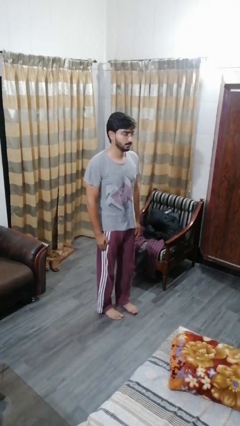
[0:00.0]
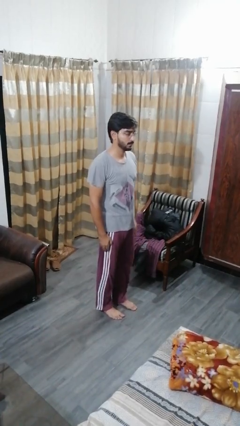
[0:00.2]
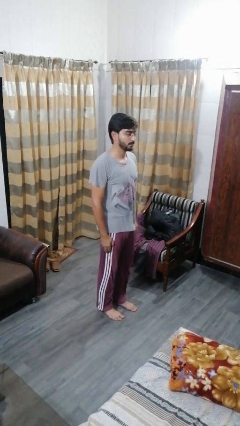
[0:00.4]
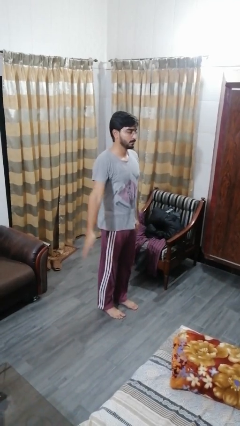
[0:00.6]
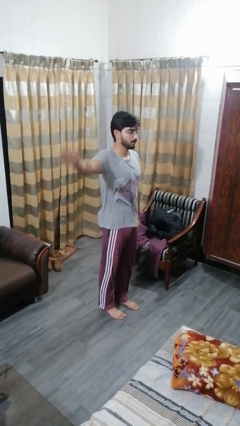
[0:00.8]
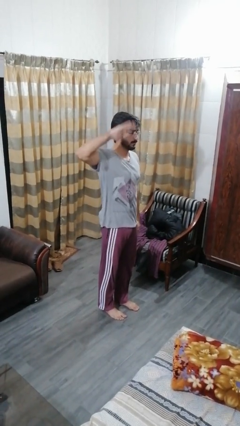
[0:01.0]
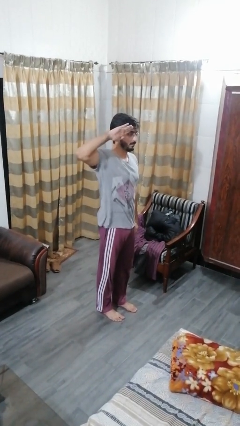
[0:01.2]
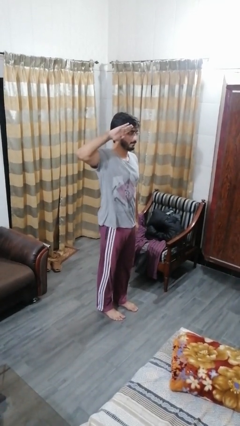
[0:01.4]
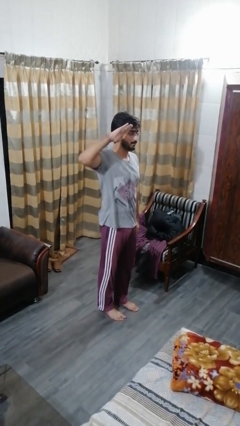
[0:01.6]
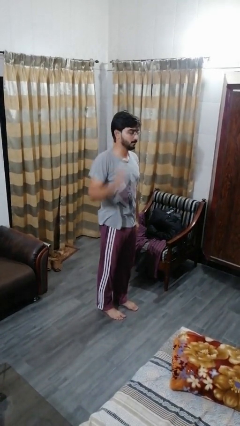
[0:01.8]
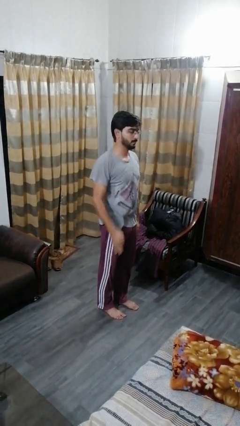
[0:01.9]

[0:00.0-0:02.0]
person salutes

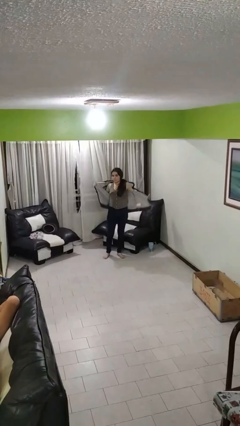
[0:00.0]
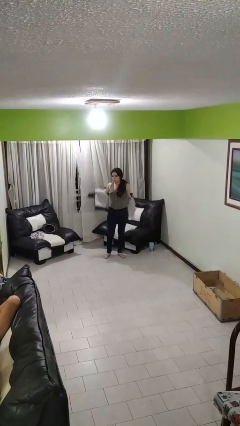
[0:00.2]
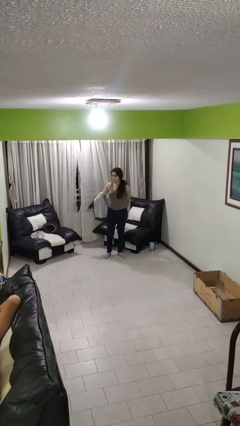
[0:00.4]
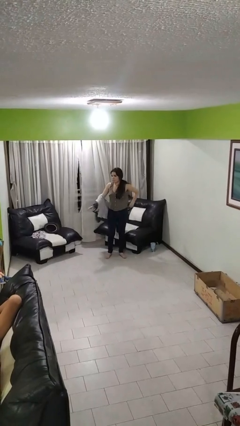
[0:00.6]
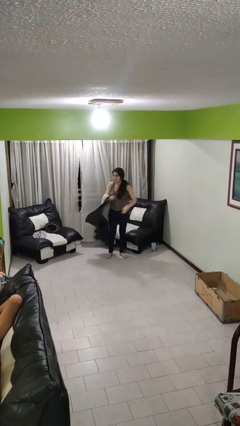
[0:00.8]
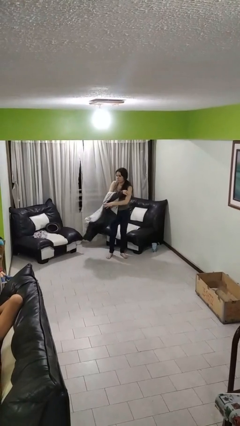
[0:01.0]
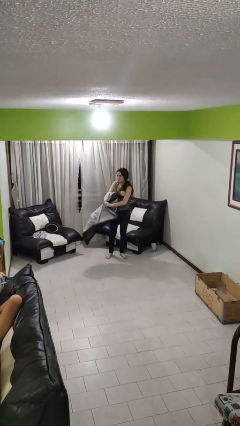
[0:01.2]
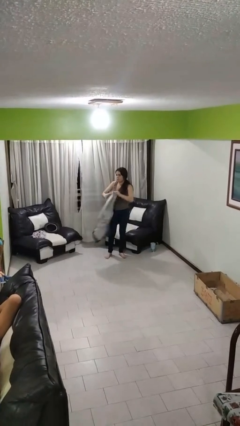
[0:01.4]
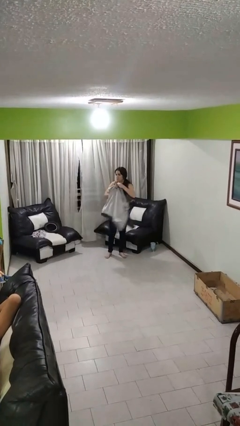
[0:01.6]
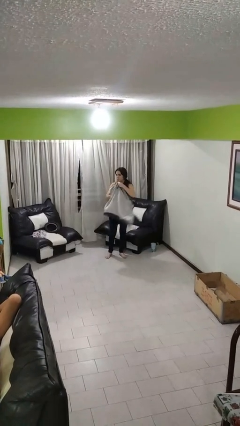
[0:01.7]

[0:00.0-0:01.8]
person takes off jacket

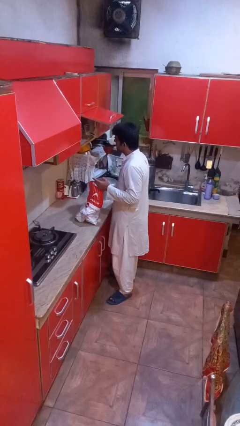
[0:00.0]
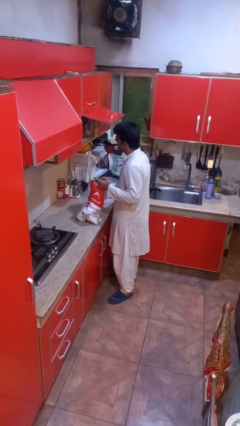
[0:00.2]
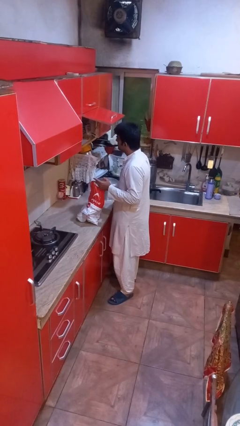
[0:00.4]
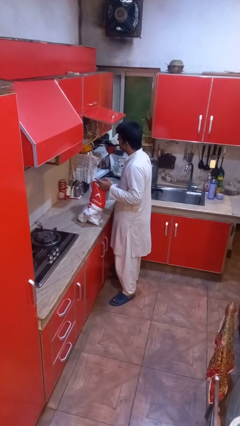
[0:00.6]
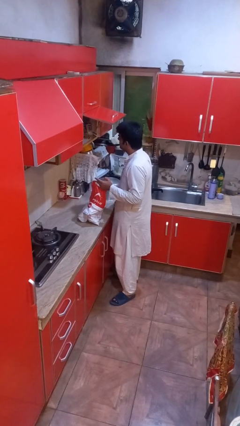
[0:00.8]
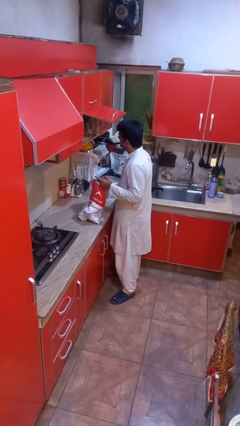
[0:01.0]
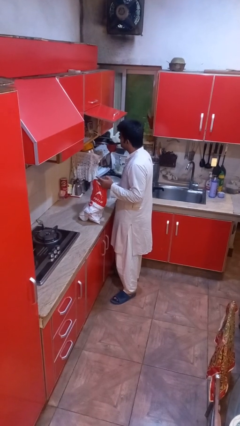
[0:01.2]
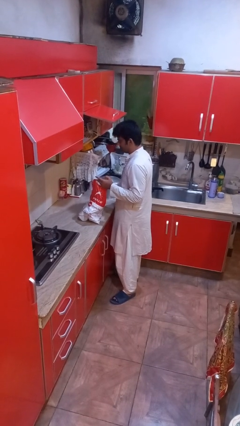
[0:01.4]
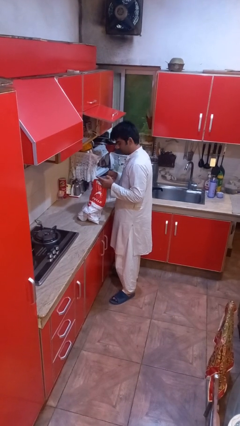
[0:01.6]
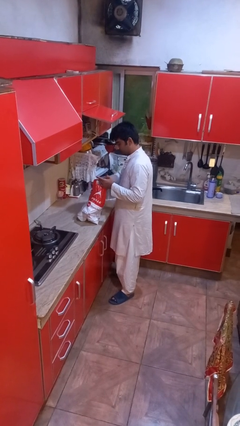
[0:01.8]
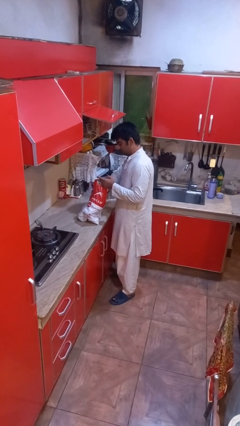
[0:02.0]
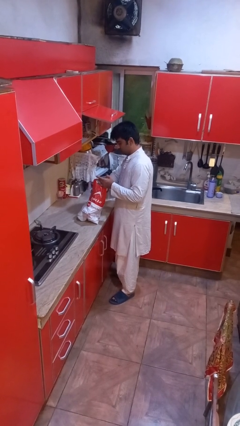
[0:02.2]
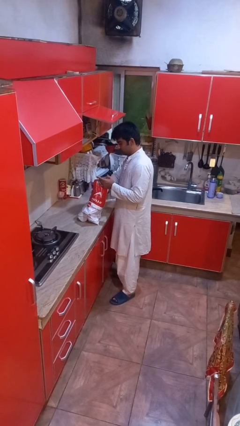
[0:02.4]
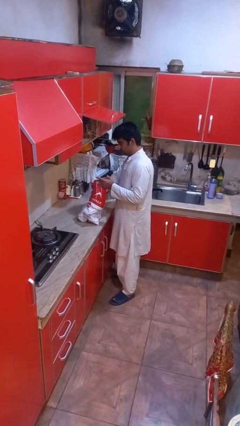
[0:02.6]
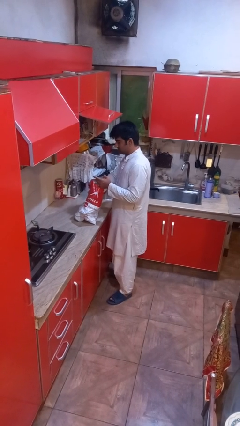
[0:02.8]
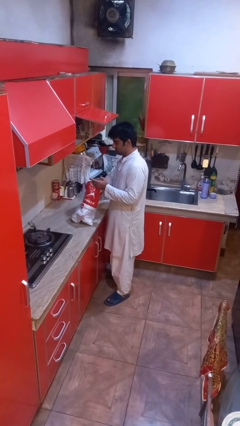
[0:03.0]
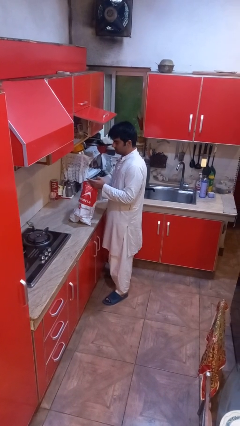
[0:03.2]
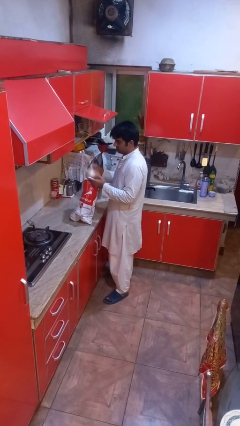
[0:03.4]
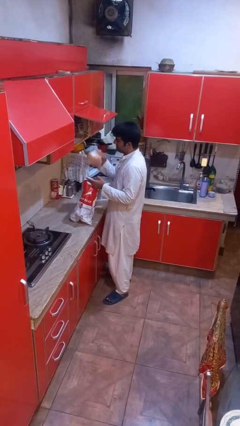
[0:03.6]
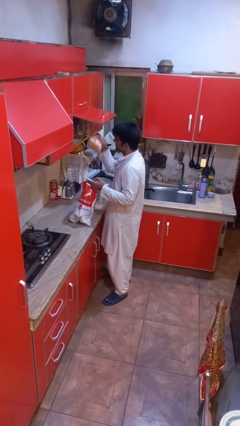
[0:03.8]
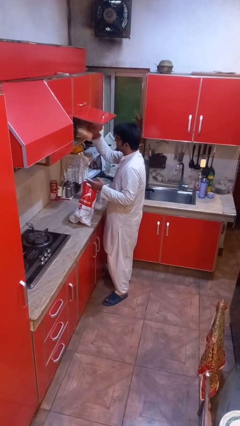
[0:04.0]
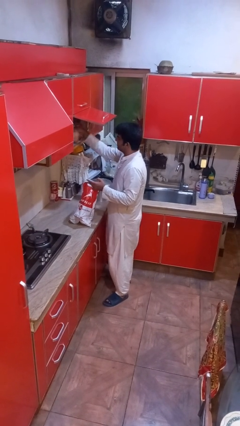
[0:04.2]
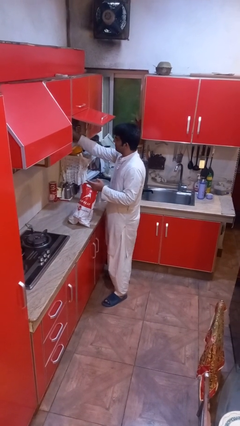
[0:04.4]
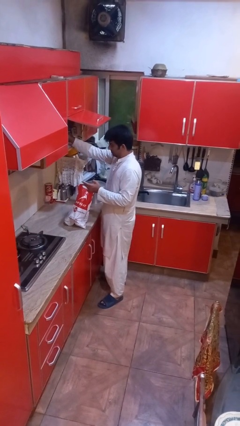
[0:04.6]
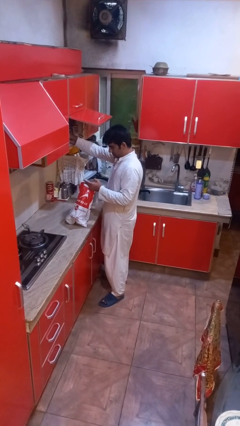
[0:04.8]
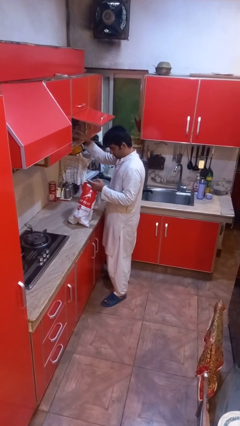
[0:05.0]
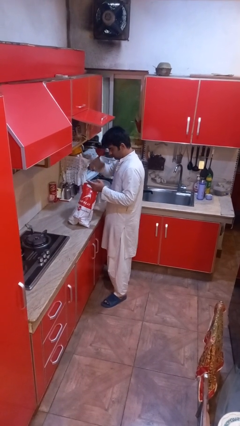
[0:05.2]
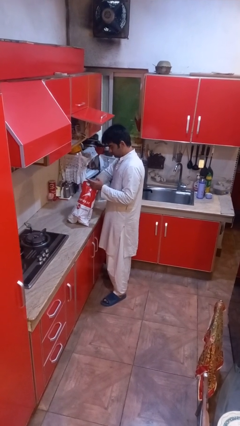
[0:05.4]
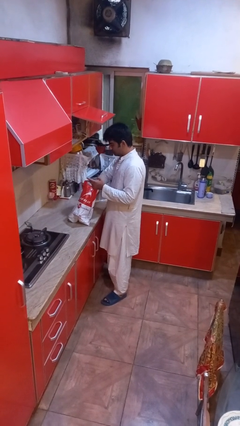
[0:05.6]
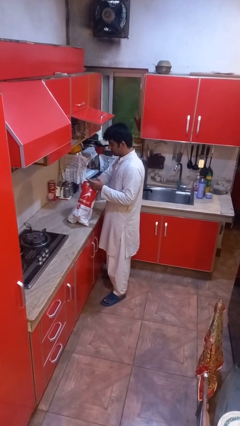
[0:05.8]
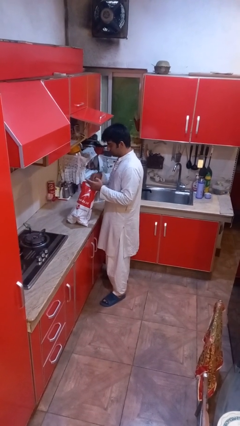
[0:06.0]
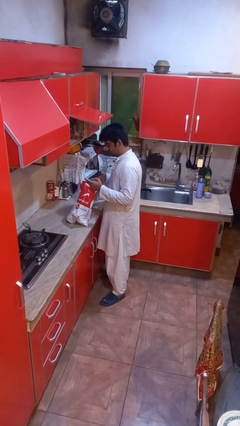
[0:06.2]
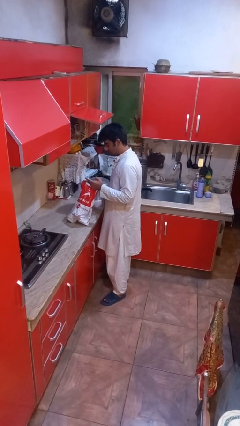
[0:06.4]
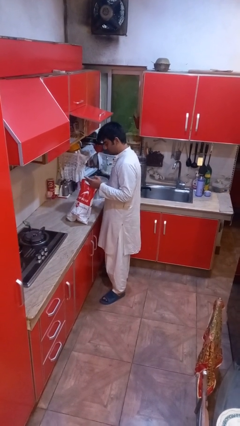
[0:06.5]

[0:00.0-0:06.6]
person loads groceries into cabinet

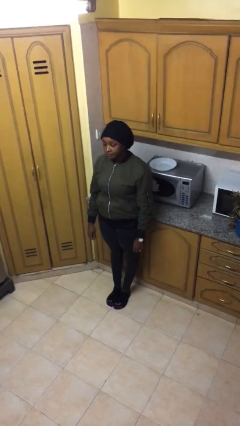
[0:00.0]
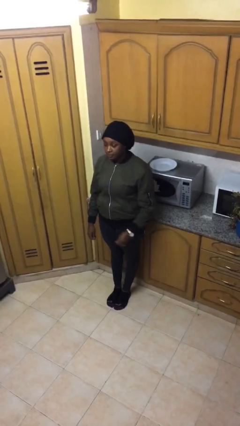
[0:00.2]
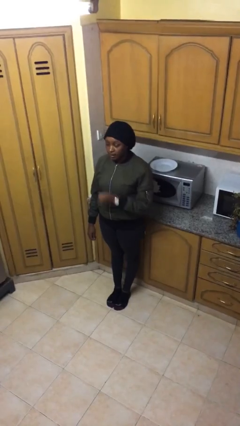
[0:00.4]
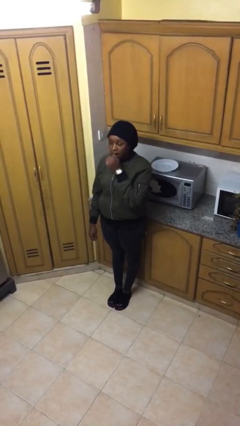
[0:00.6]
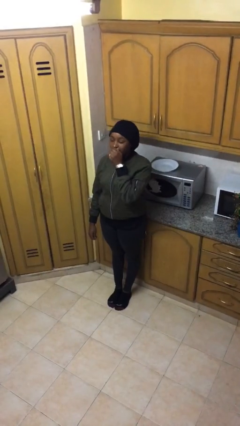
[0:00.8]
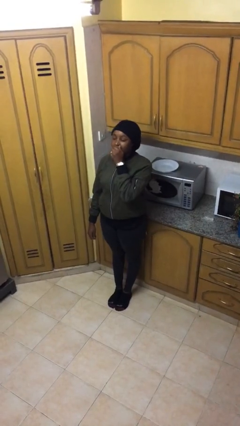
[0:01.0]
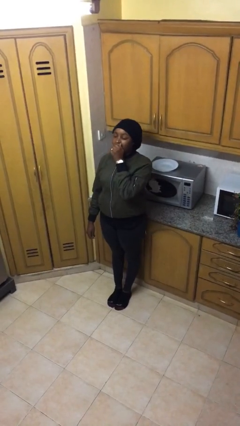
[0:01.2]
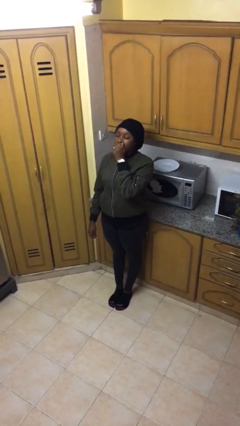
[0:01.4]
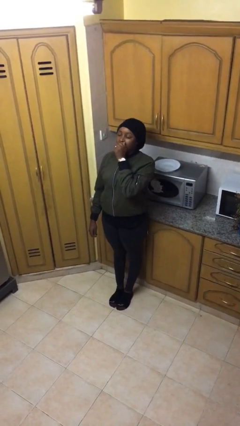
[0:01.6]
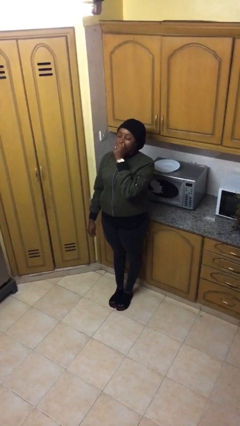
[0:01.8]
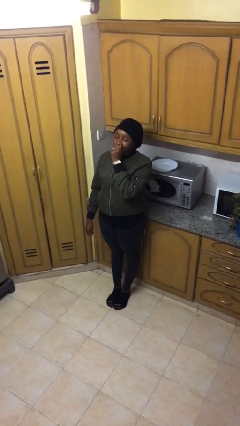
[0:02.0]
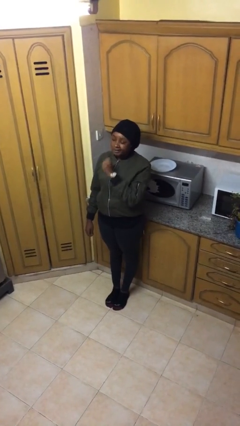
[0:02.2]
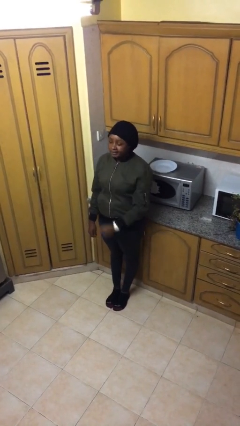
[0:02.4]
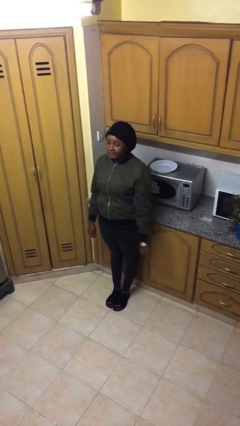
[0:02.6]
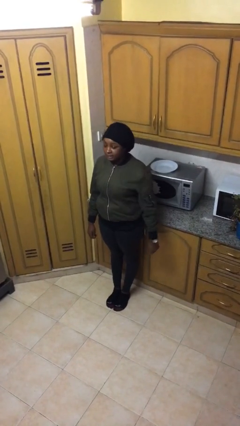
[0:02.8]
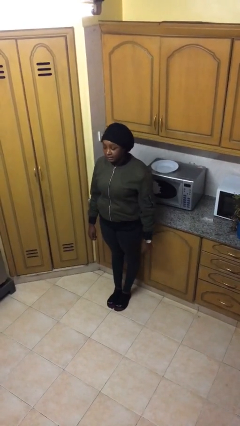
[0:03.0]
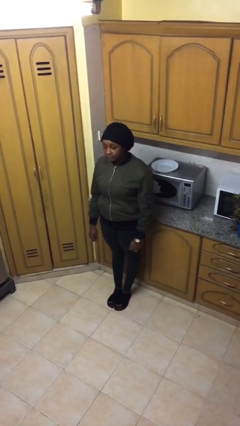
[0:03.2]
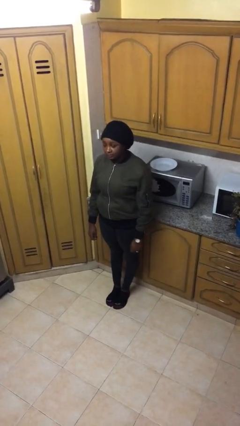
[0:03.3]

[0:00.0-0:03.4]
person yawns

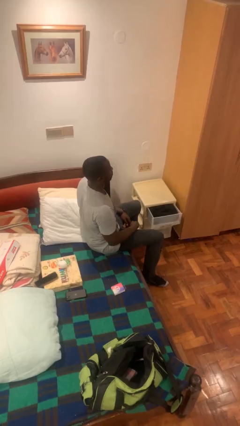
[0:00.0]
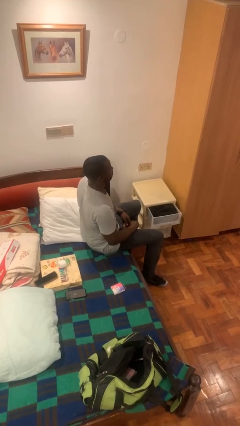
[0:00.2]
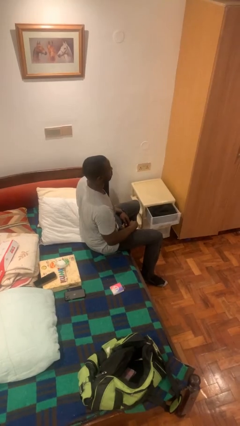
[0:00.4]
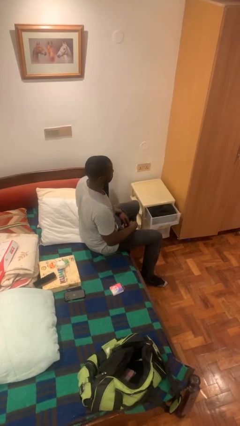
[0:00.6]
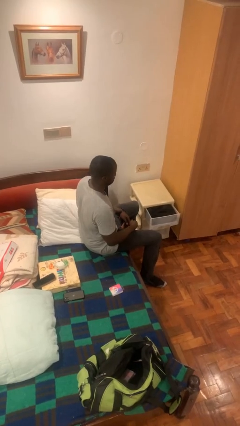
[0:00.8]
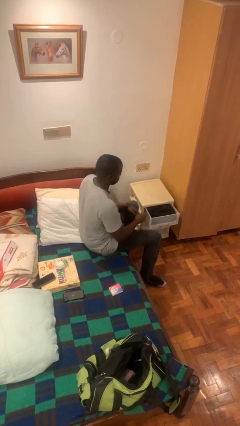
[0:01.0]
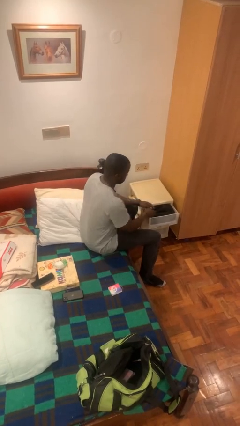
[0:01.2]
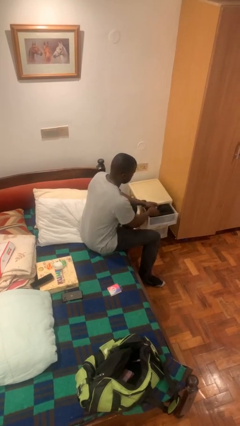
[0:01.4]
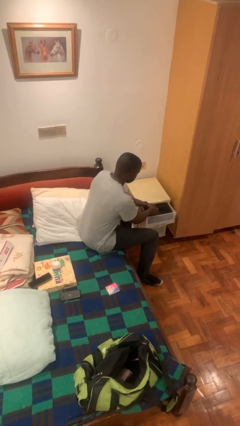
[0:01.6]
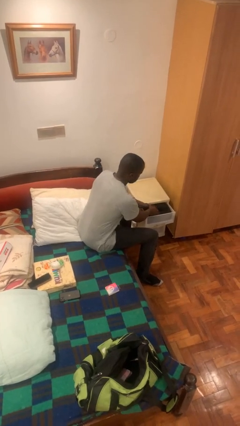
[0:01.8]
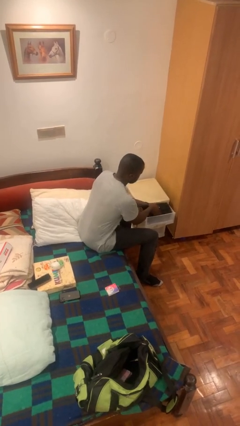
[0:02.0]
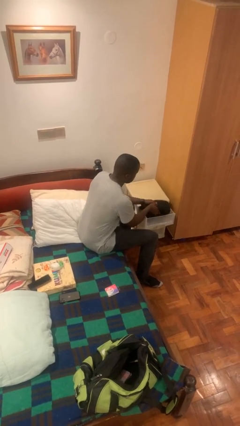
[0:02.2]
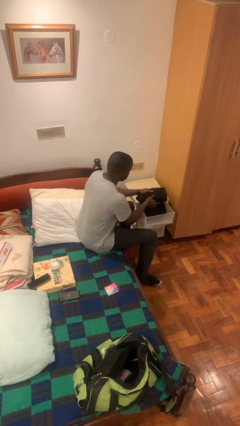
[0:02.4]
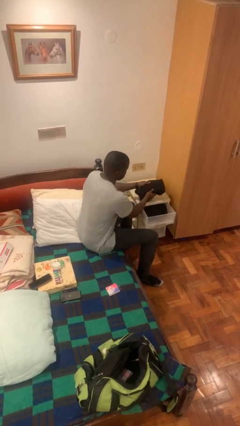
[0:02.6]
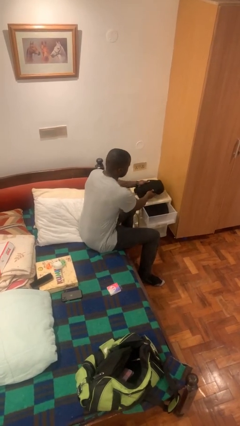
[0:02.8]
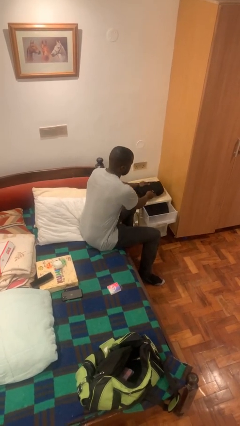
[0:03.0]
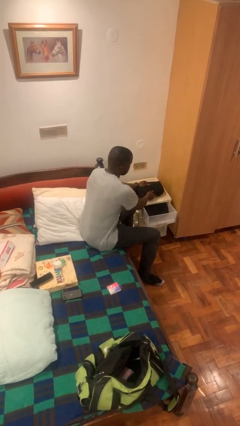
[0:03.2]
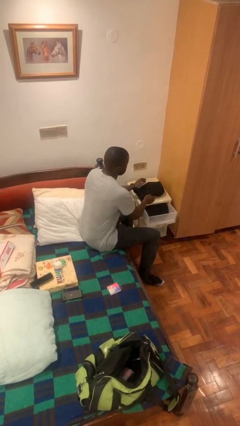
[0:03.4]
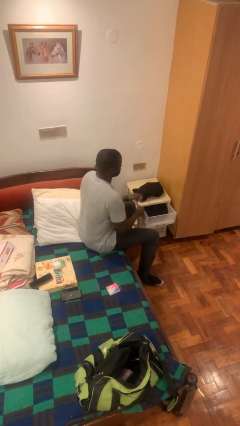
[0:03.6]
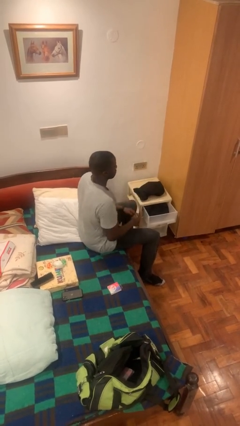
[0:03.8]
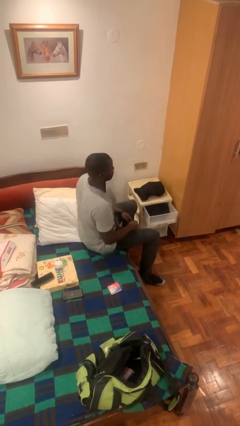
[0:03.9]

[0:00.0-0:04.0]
person takes clothes from dresser
